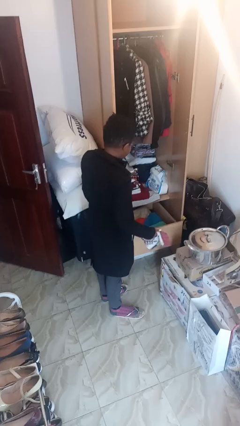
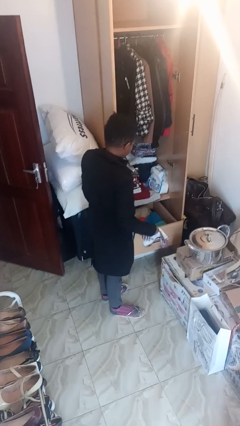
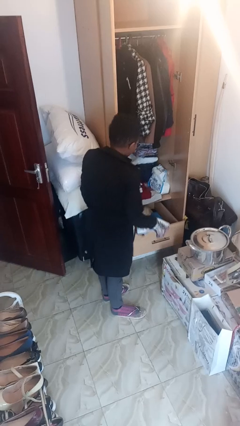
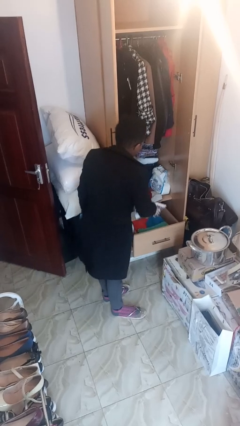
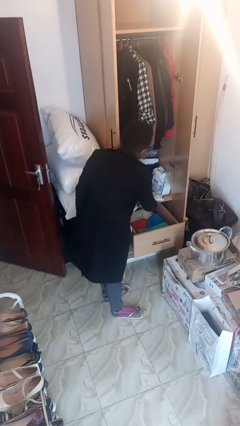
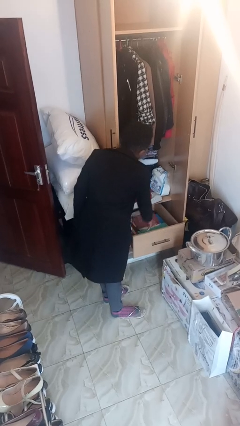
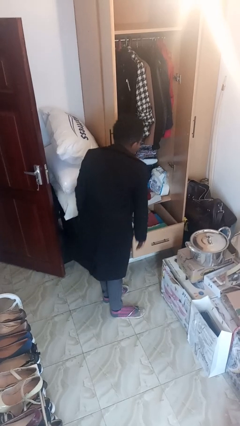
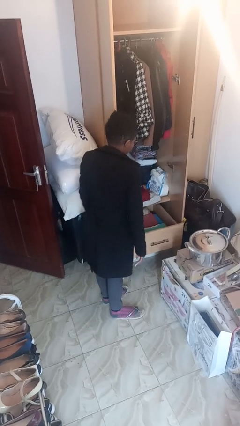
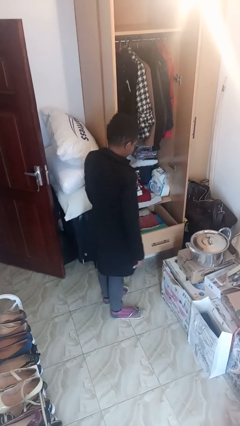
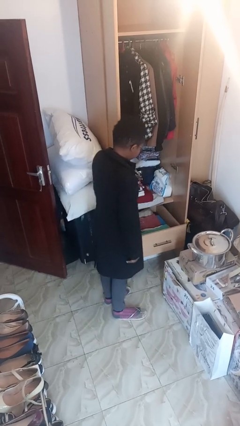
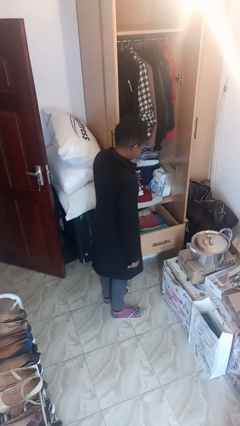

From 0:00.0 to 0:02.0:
person puts clothes into dresser

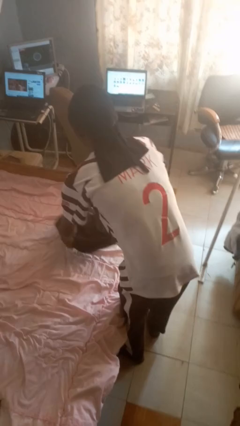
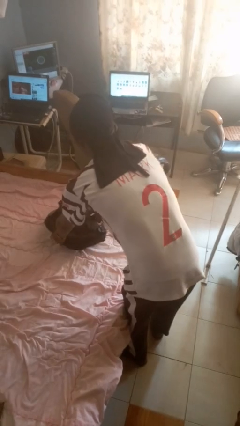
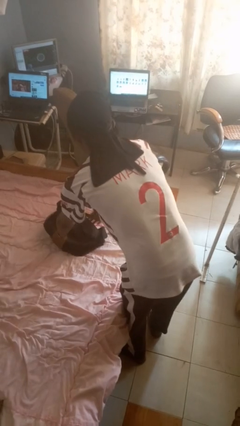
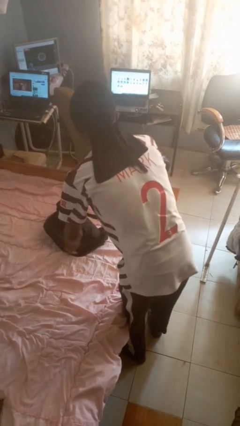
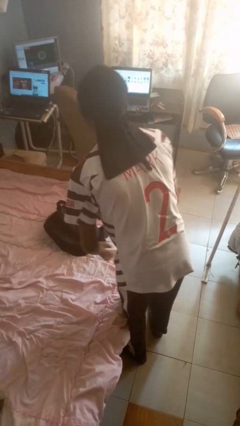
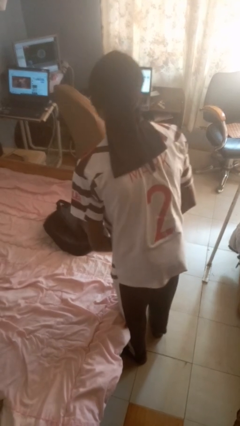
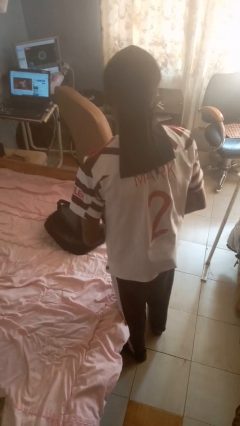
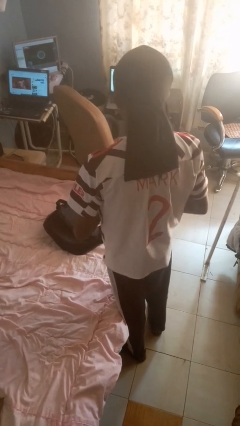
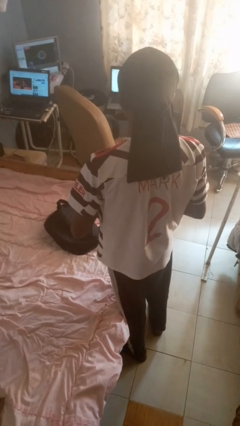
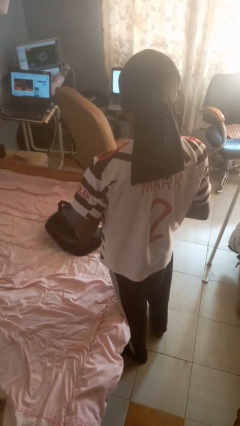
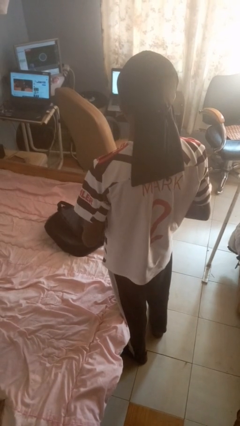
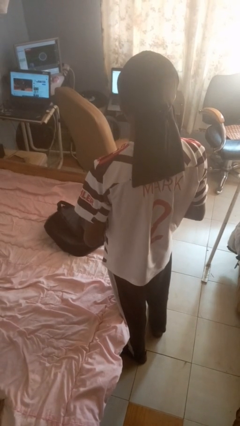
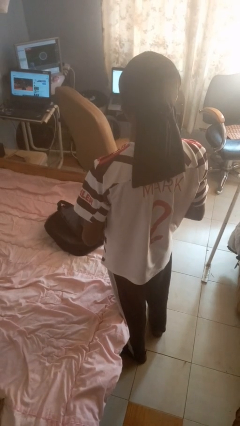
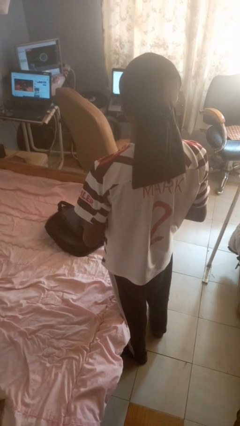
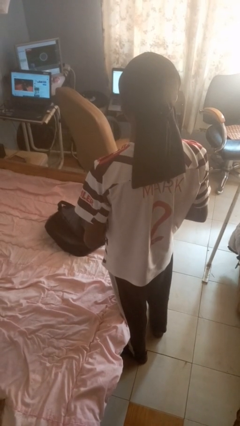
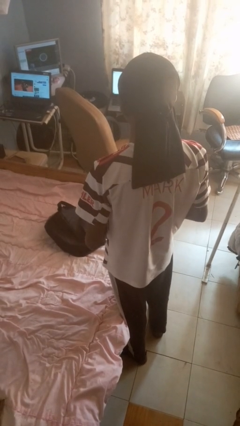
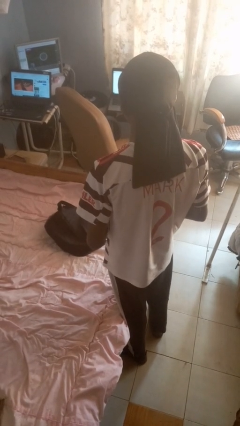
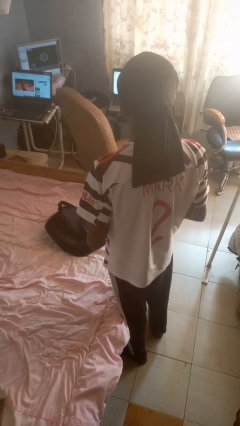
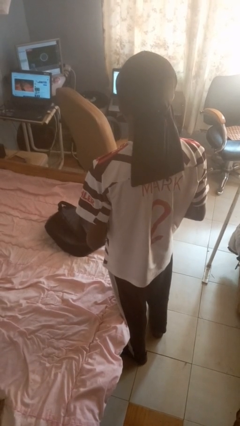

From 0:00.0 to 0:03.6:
person puts down object on bed

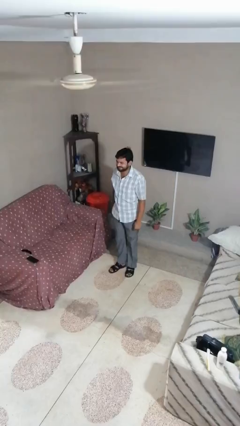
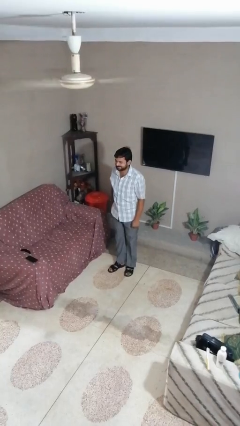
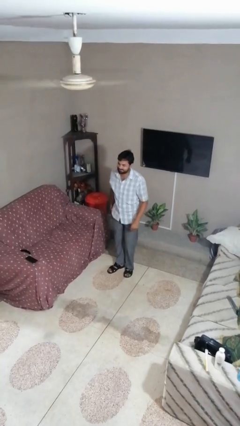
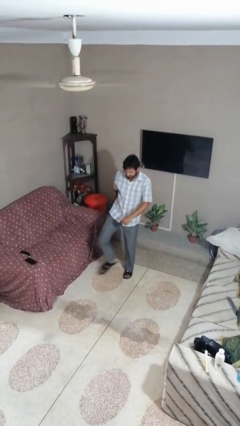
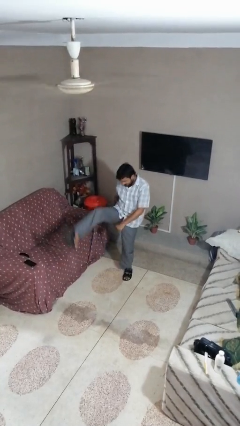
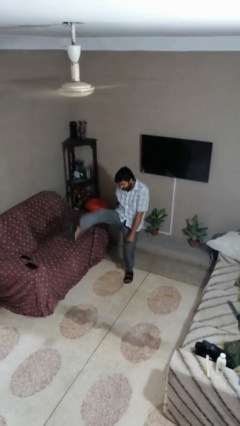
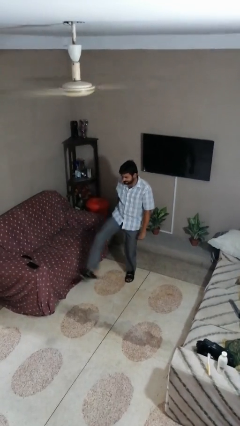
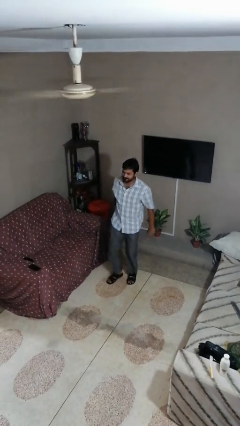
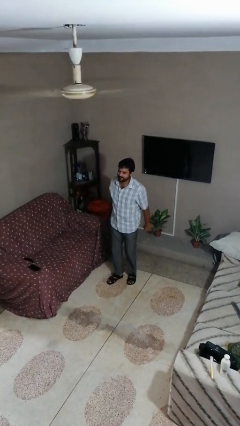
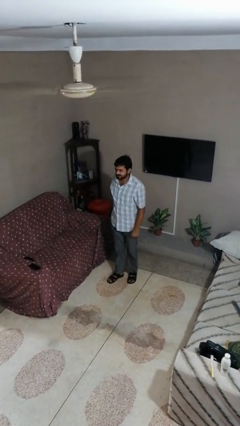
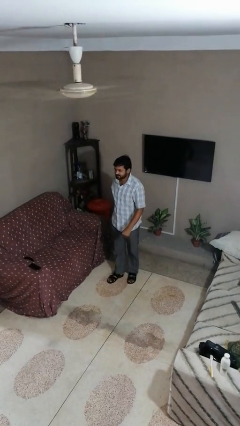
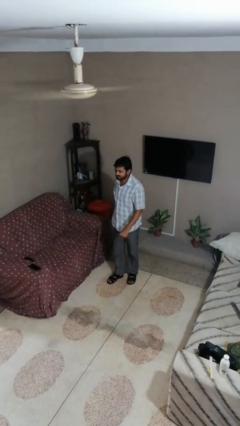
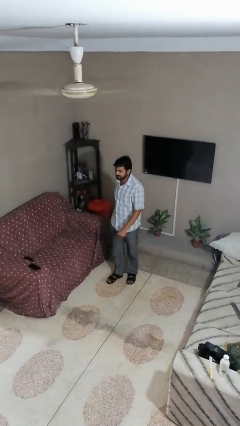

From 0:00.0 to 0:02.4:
person karate kicks

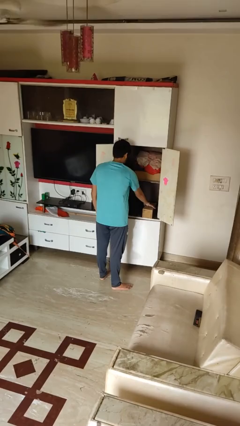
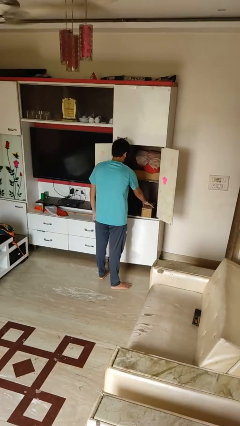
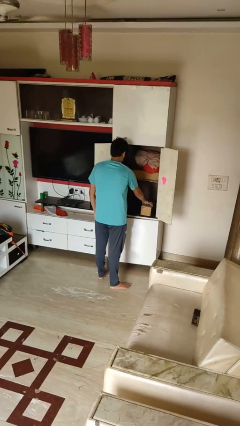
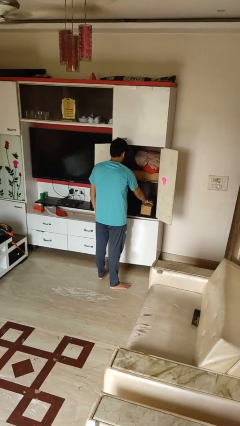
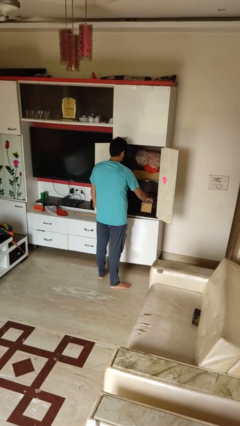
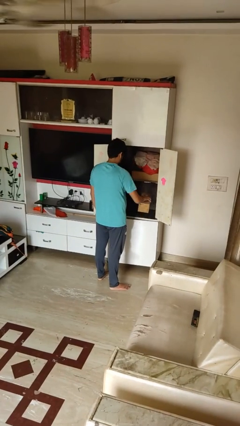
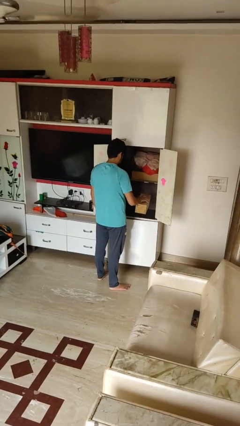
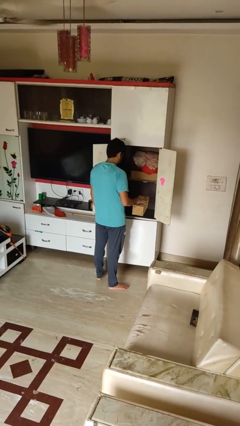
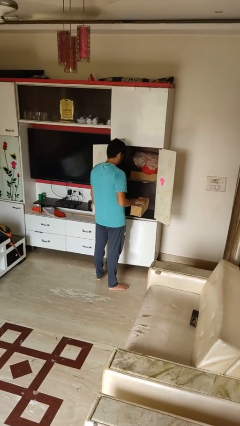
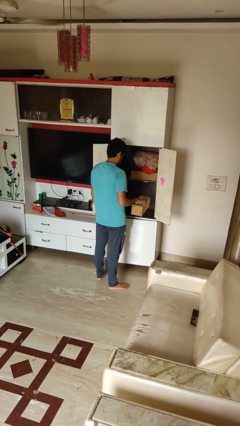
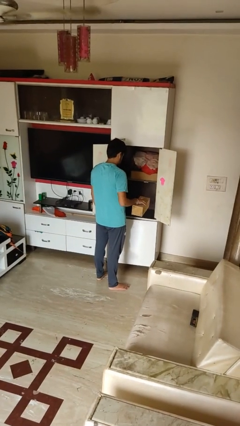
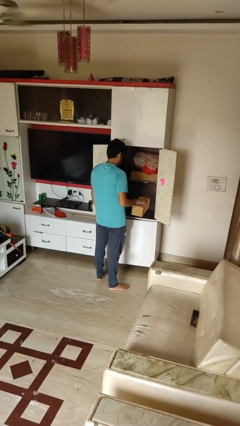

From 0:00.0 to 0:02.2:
person picks up object from cabinet

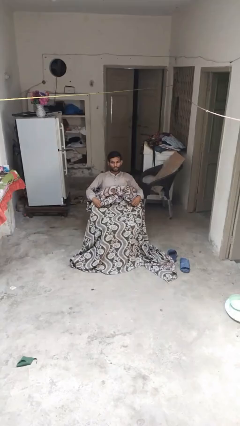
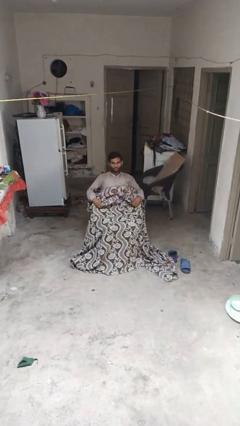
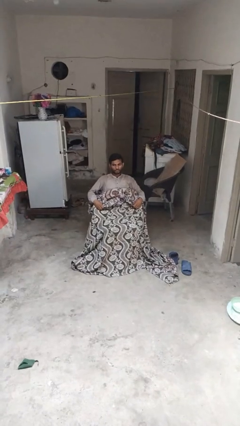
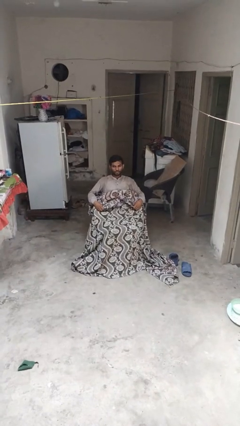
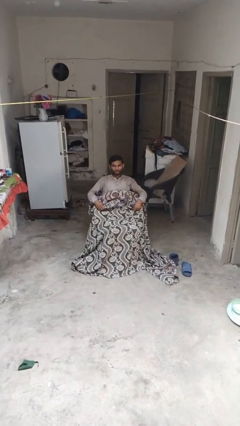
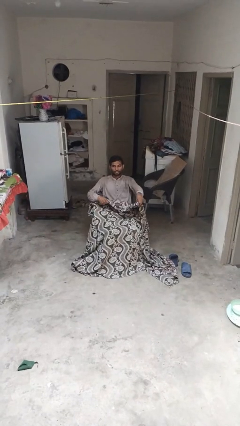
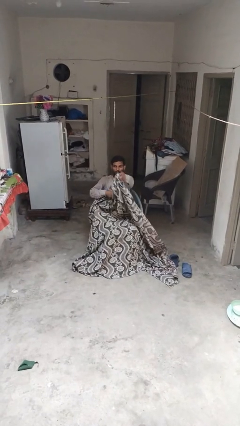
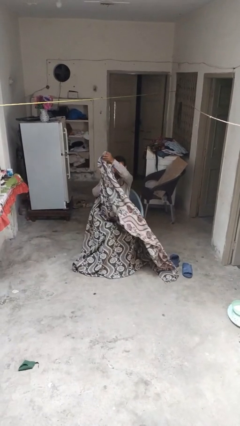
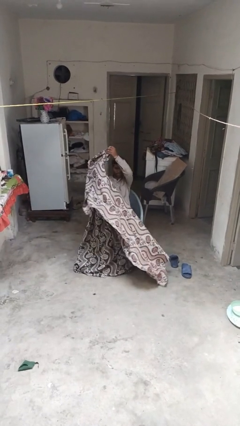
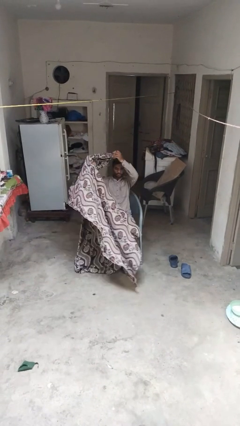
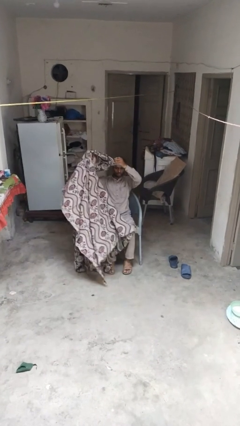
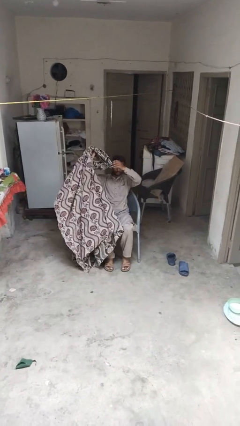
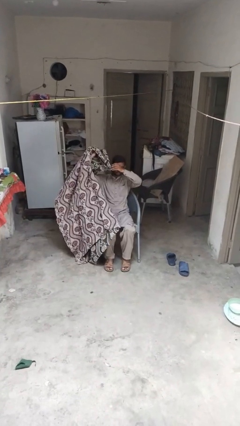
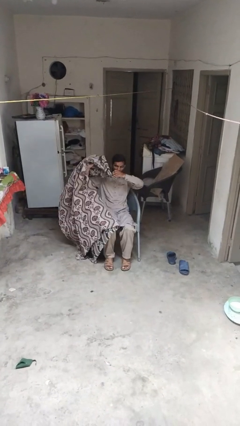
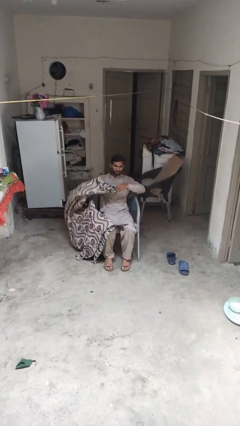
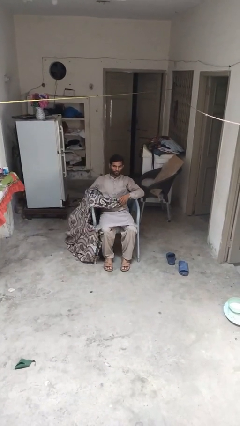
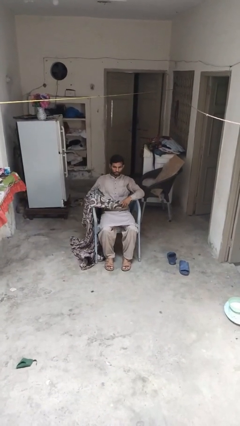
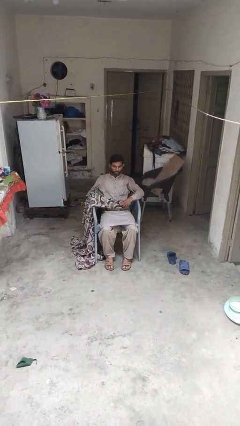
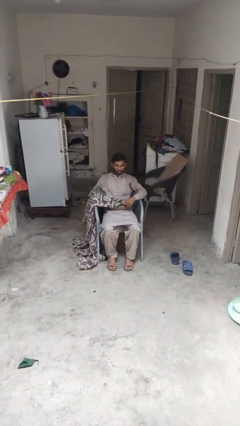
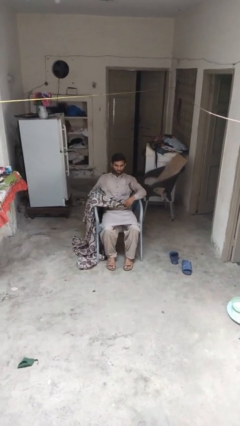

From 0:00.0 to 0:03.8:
person uncovers with blanket

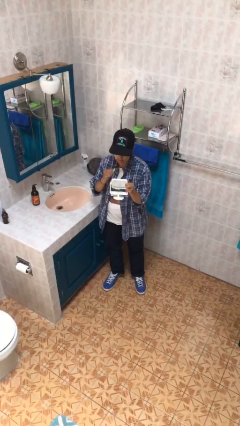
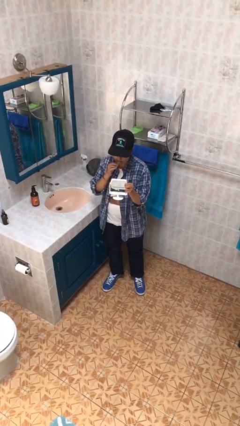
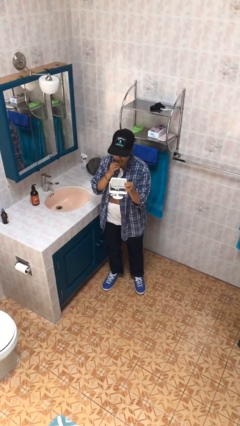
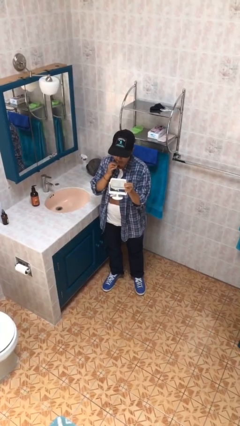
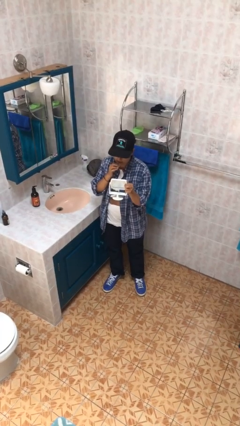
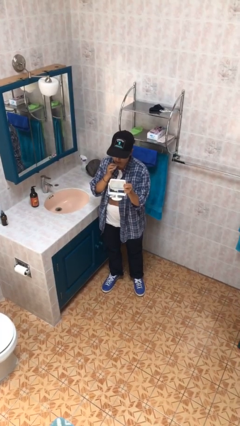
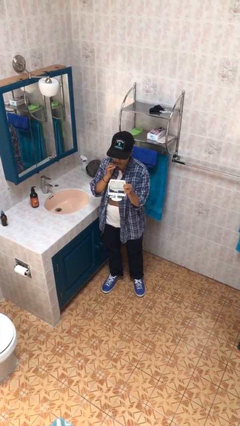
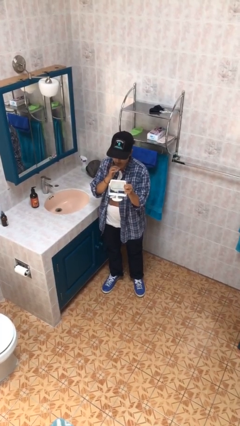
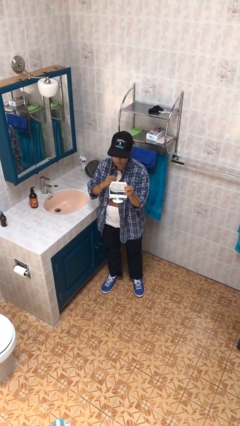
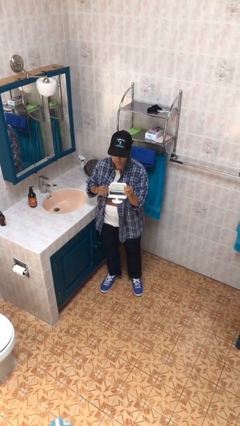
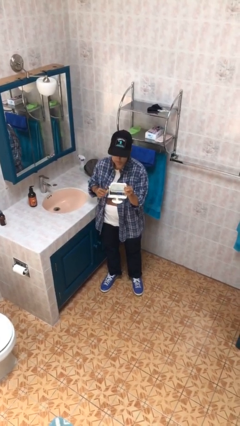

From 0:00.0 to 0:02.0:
person applies lip makeup

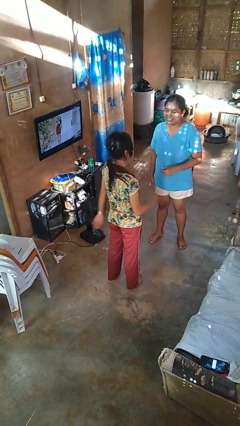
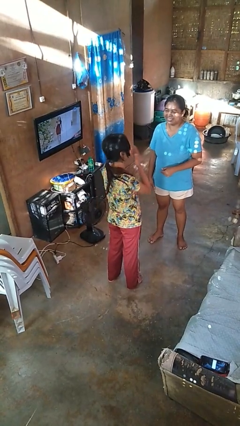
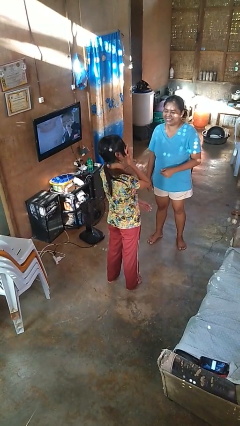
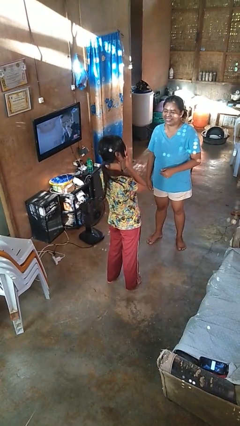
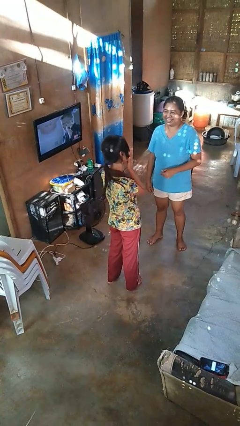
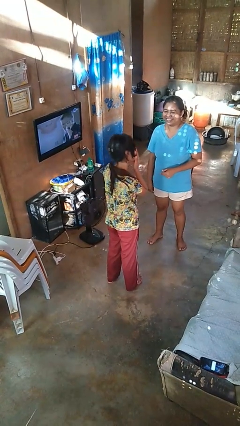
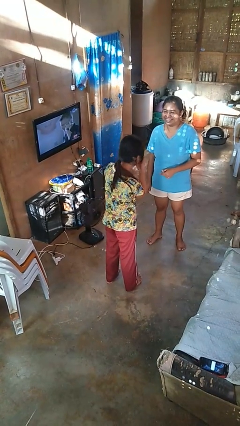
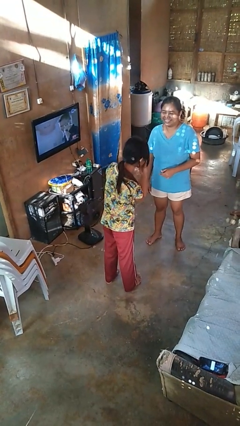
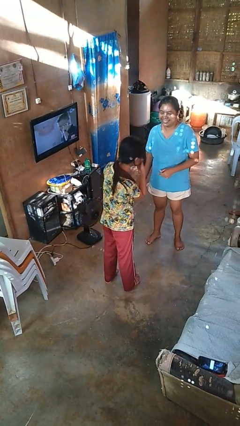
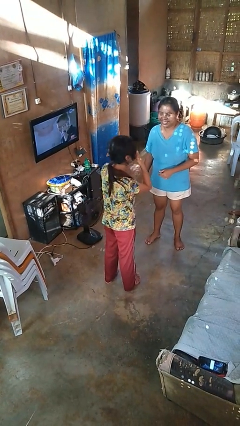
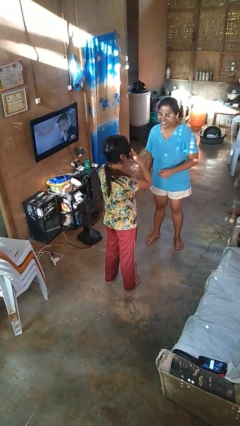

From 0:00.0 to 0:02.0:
person laughs with person
